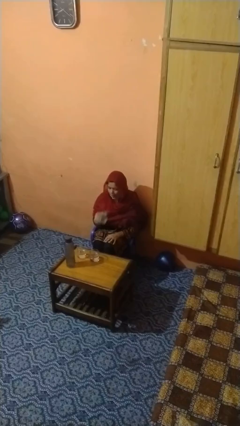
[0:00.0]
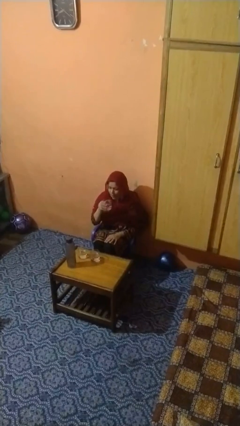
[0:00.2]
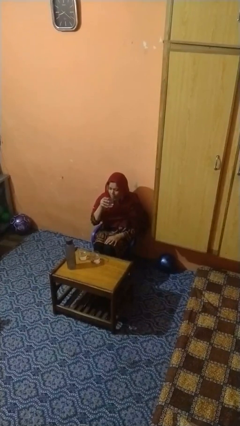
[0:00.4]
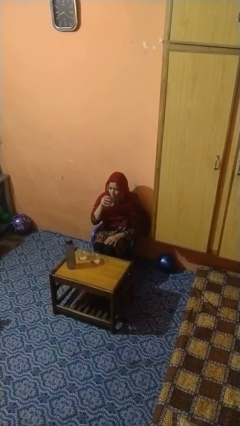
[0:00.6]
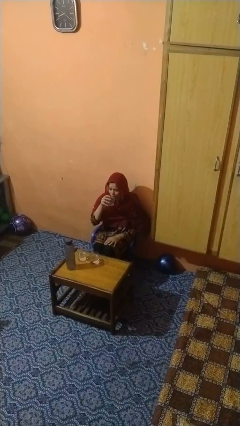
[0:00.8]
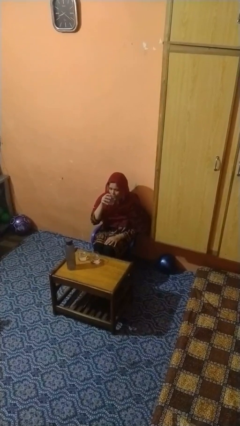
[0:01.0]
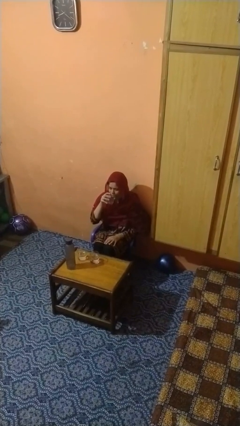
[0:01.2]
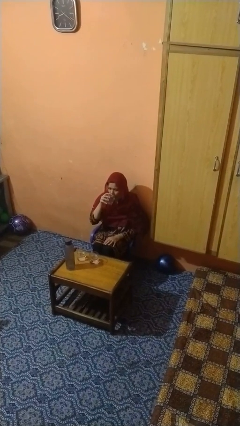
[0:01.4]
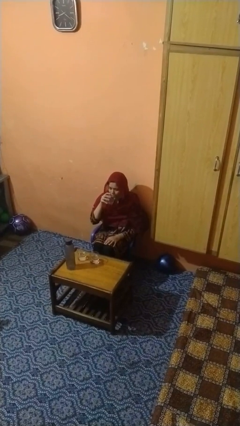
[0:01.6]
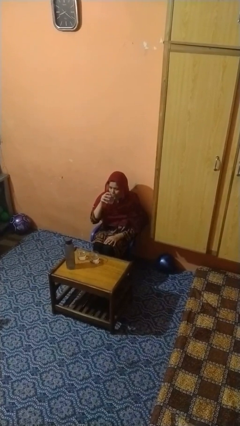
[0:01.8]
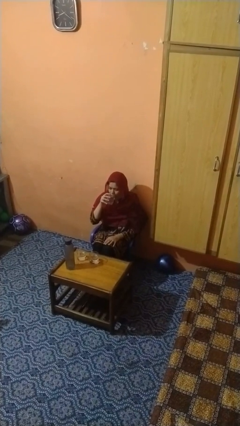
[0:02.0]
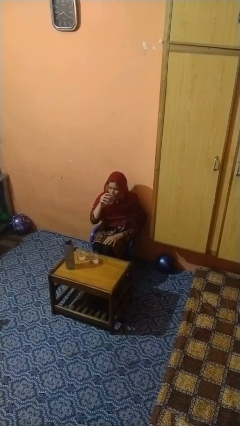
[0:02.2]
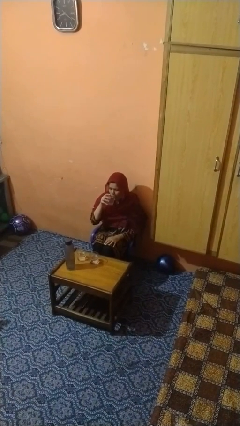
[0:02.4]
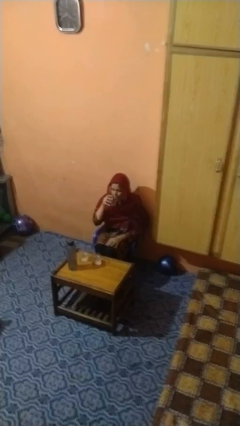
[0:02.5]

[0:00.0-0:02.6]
person drinks from shotglass

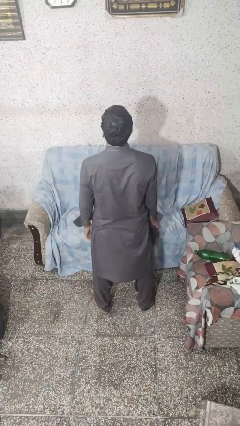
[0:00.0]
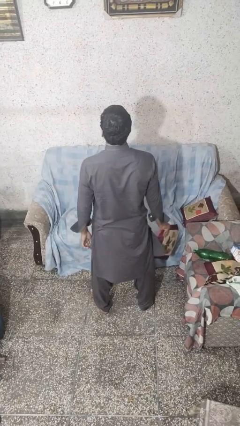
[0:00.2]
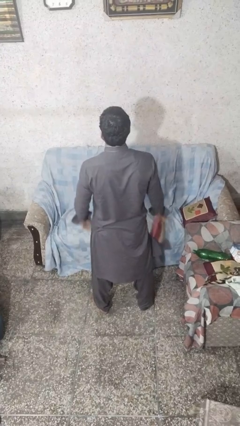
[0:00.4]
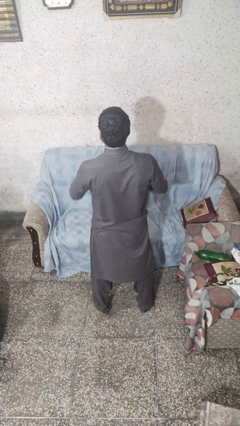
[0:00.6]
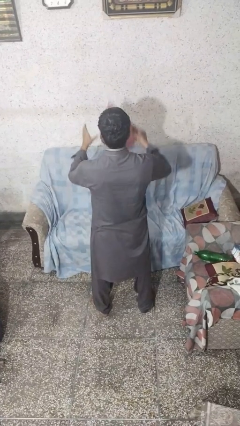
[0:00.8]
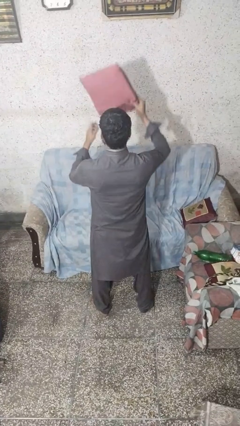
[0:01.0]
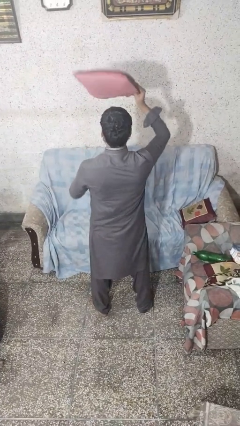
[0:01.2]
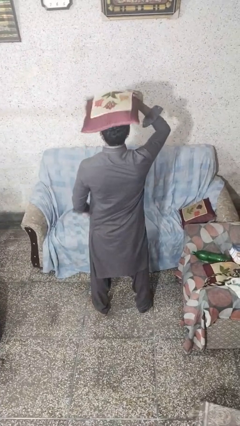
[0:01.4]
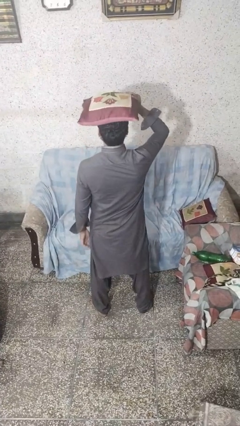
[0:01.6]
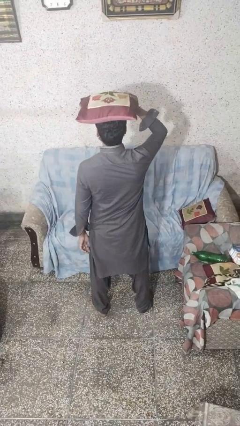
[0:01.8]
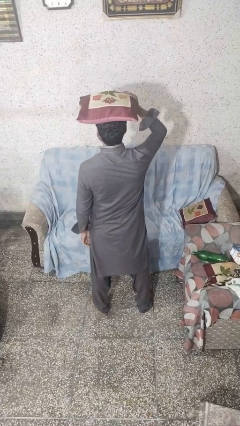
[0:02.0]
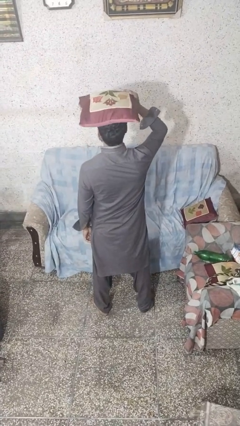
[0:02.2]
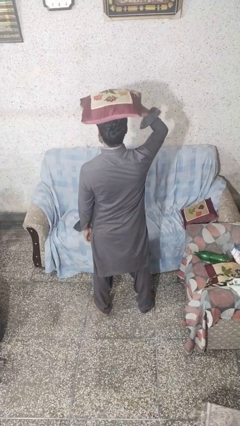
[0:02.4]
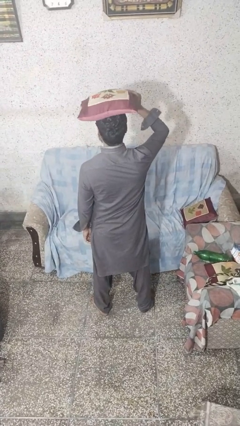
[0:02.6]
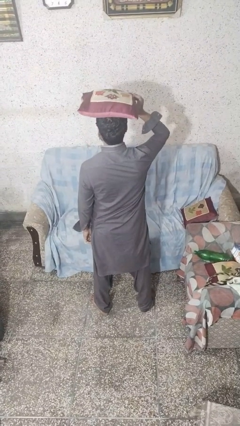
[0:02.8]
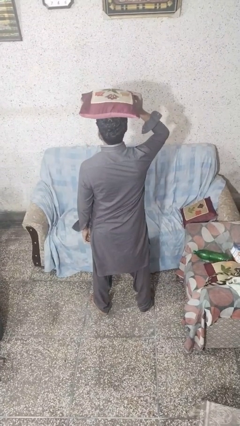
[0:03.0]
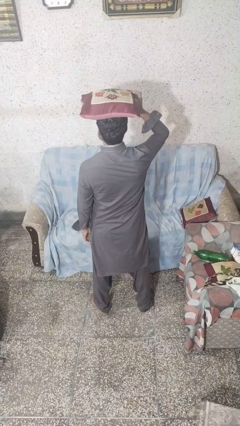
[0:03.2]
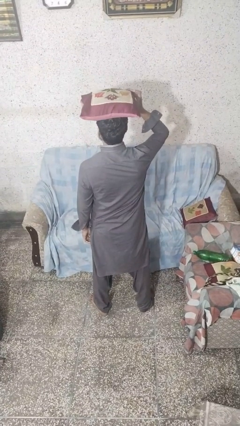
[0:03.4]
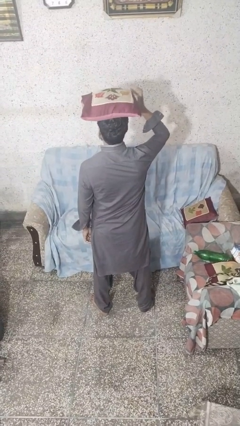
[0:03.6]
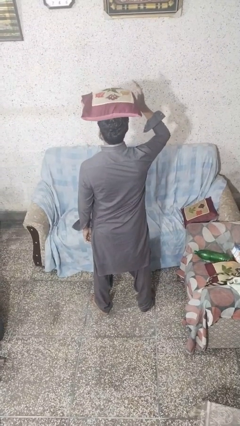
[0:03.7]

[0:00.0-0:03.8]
person holds object above head

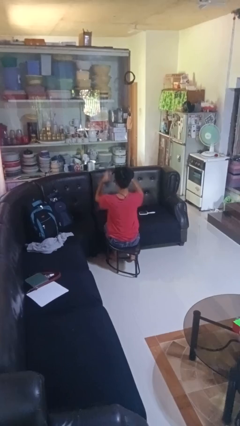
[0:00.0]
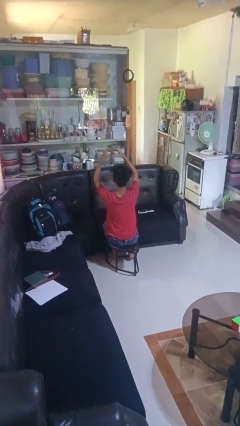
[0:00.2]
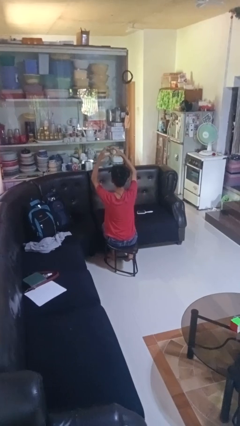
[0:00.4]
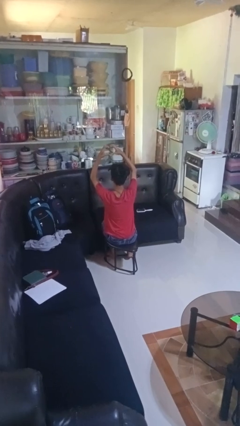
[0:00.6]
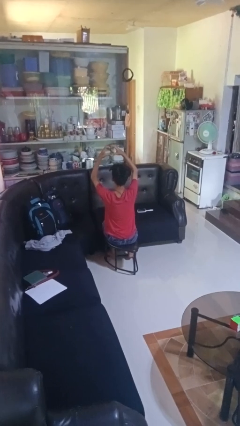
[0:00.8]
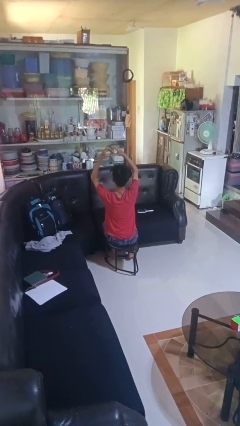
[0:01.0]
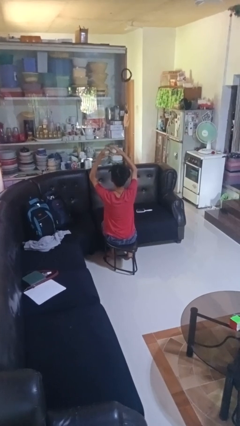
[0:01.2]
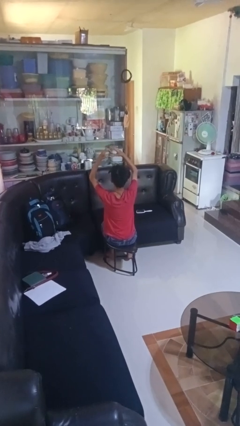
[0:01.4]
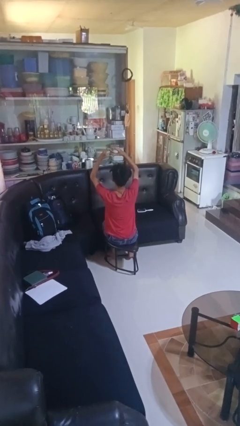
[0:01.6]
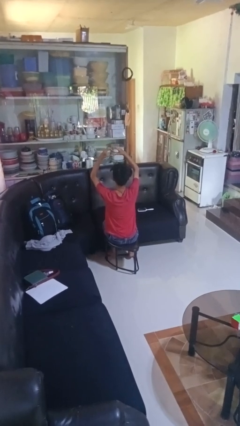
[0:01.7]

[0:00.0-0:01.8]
person gestures heart

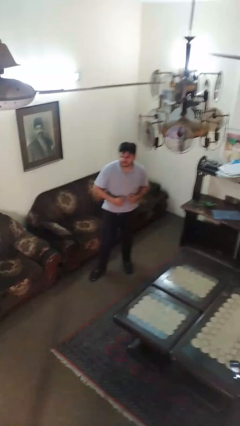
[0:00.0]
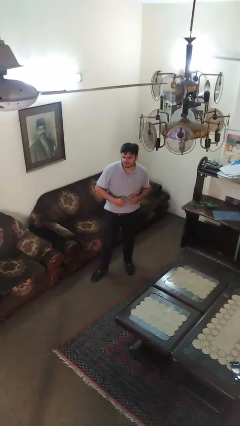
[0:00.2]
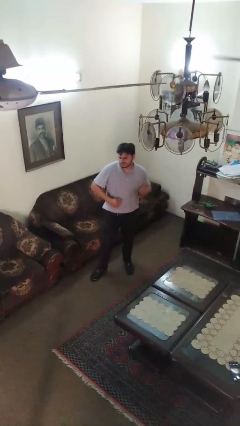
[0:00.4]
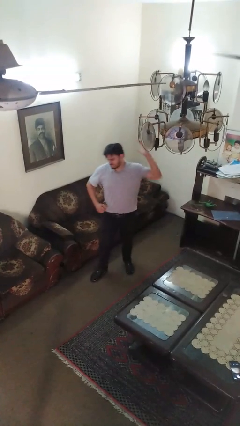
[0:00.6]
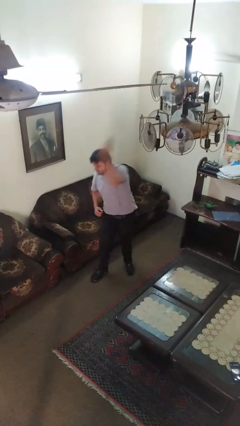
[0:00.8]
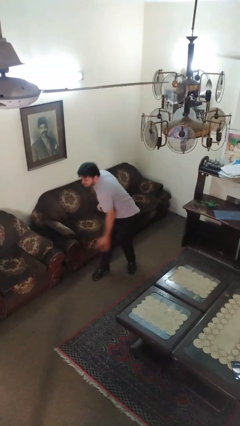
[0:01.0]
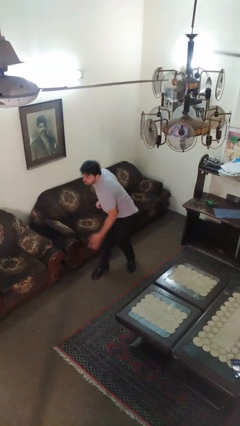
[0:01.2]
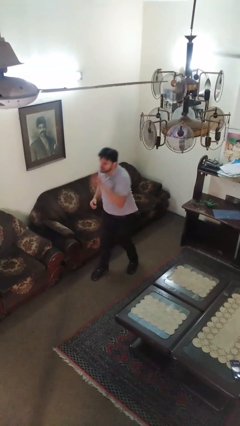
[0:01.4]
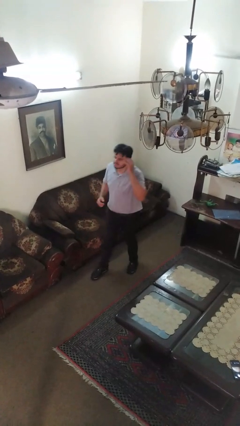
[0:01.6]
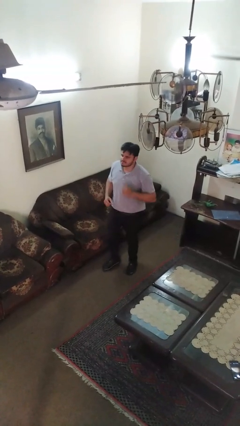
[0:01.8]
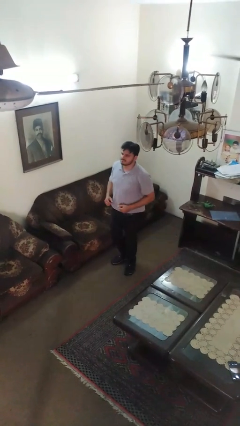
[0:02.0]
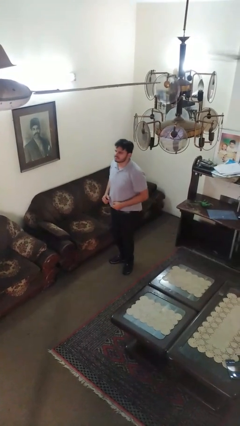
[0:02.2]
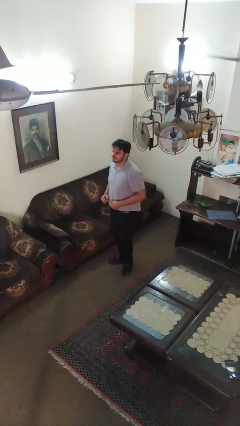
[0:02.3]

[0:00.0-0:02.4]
person karate chop

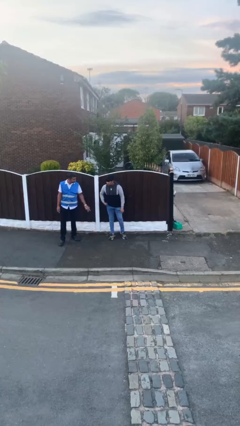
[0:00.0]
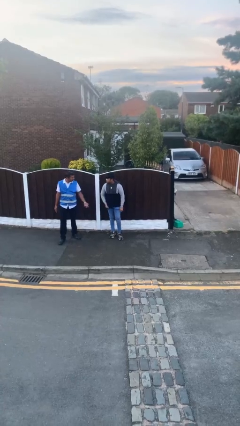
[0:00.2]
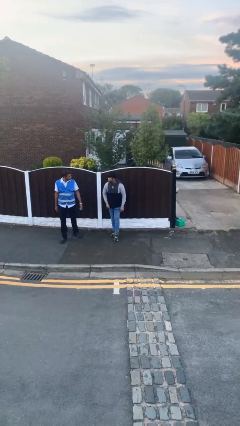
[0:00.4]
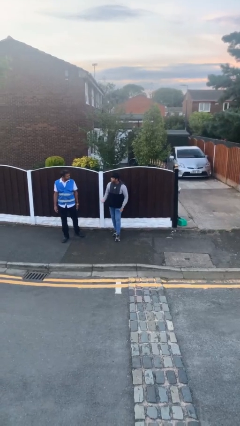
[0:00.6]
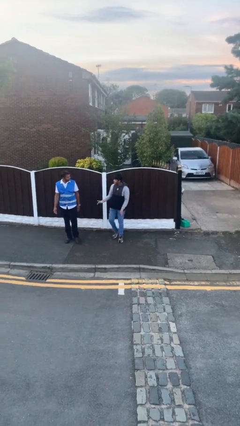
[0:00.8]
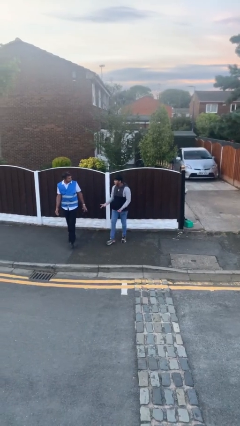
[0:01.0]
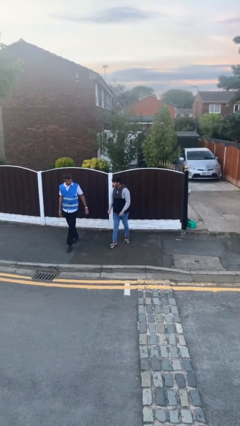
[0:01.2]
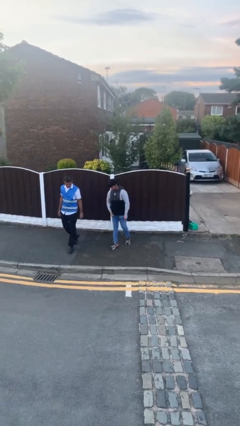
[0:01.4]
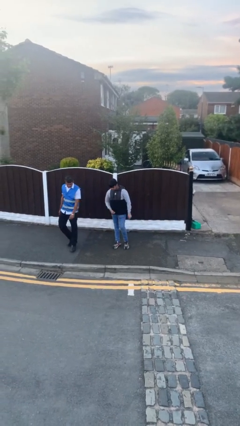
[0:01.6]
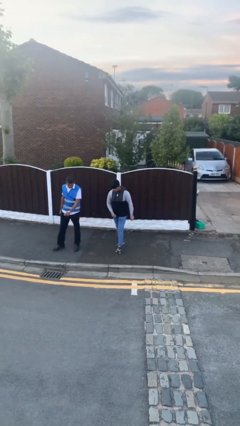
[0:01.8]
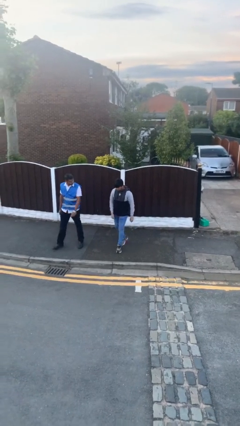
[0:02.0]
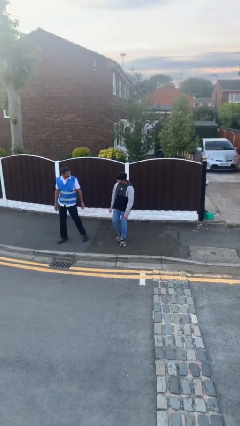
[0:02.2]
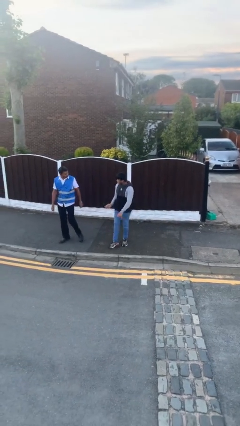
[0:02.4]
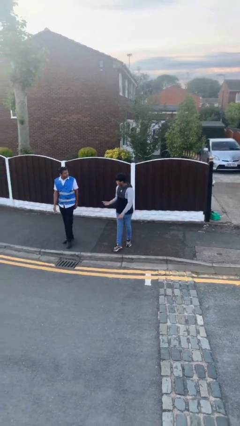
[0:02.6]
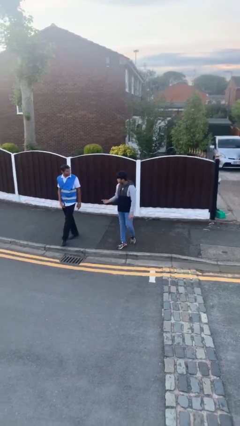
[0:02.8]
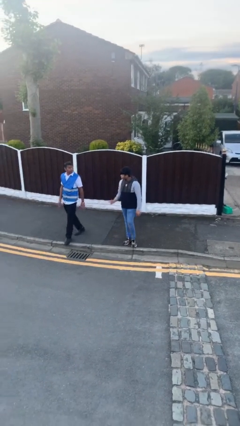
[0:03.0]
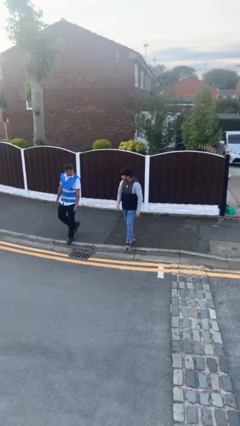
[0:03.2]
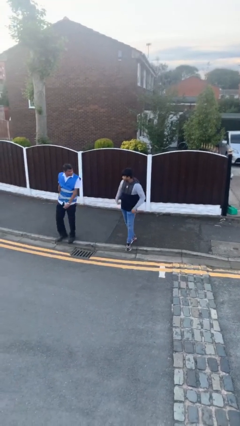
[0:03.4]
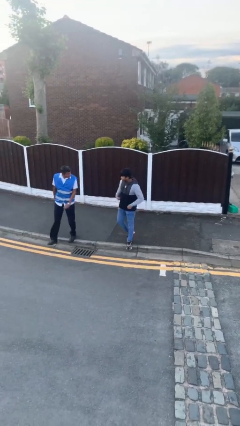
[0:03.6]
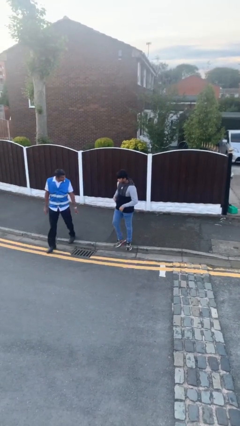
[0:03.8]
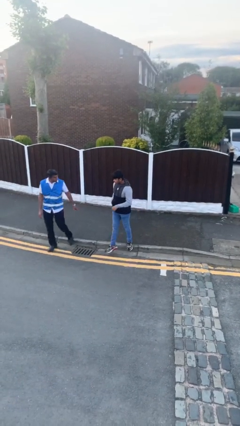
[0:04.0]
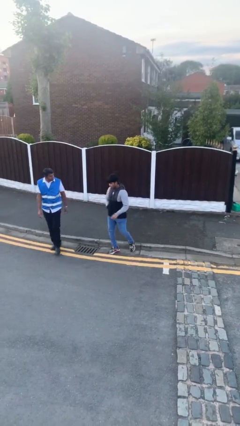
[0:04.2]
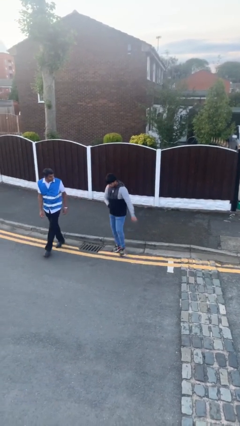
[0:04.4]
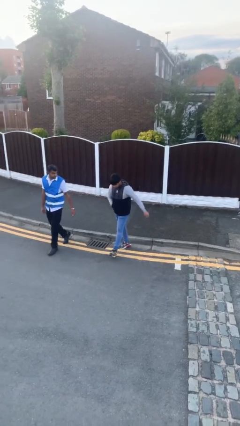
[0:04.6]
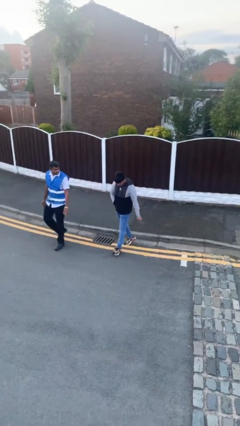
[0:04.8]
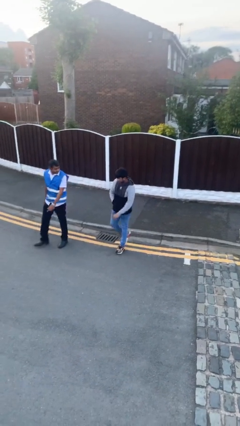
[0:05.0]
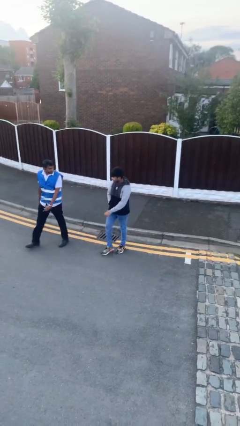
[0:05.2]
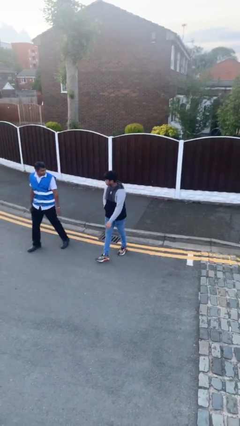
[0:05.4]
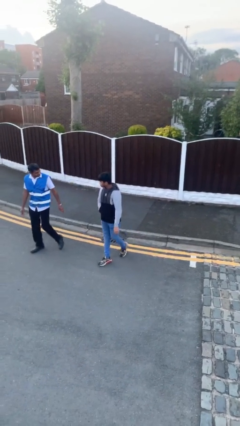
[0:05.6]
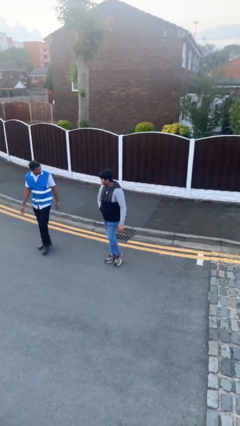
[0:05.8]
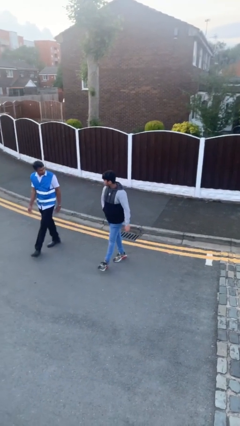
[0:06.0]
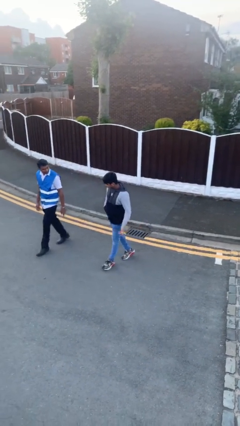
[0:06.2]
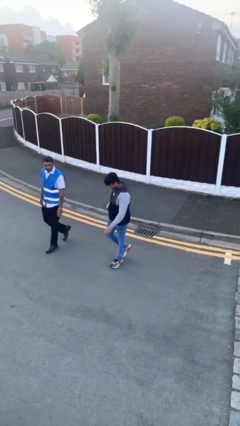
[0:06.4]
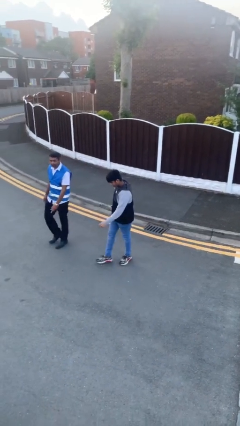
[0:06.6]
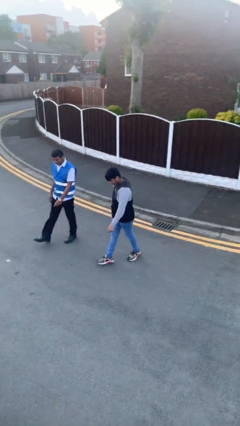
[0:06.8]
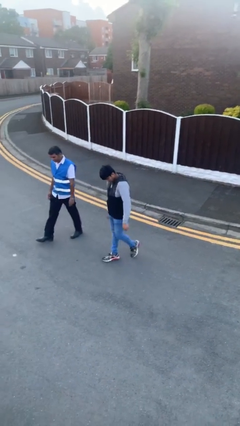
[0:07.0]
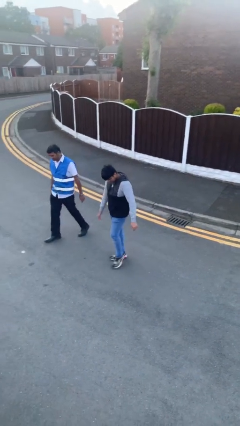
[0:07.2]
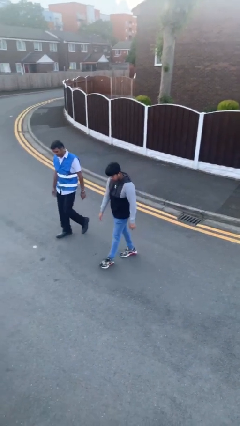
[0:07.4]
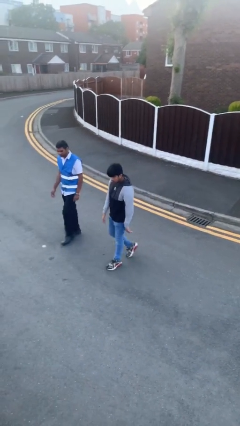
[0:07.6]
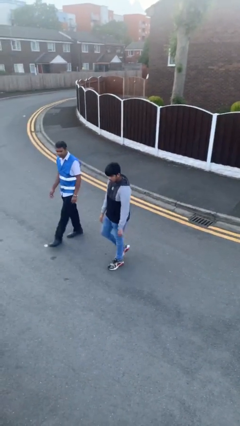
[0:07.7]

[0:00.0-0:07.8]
person talks to person
